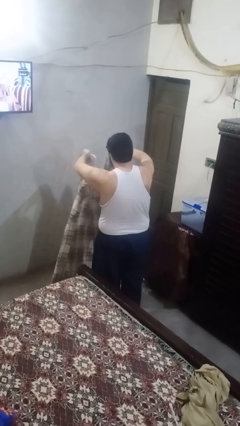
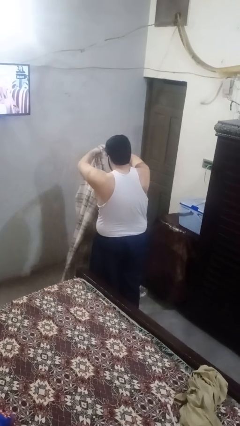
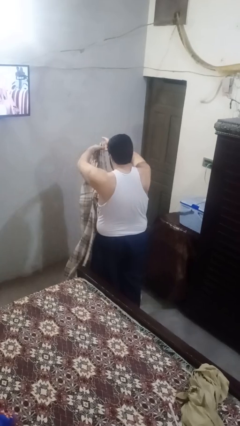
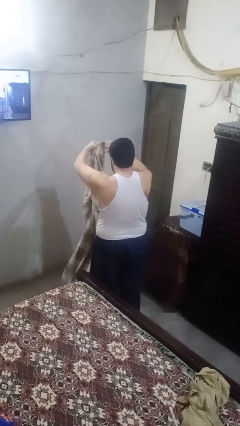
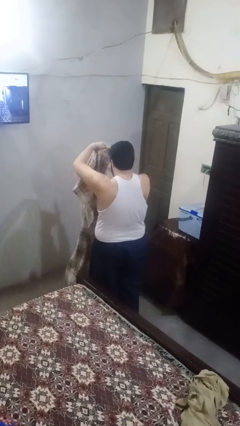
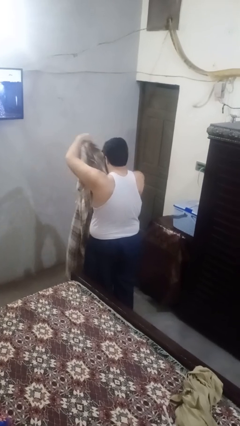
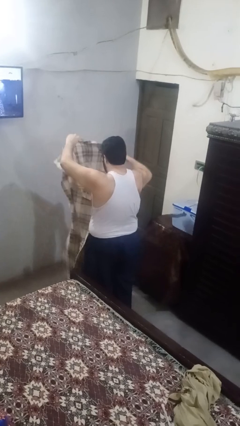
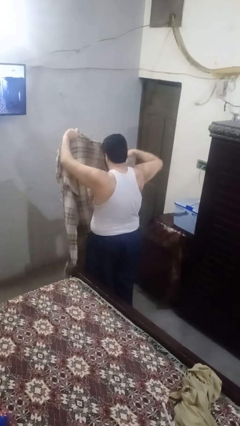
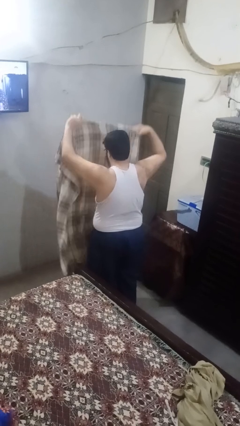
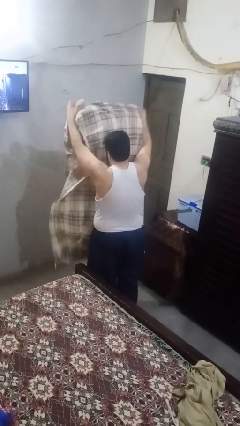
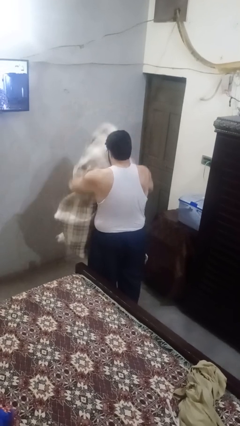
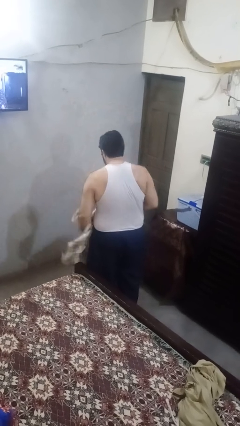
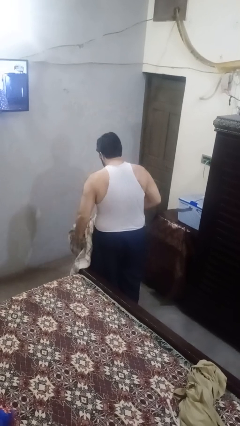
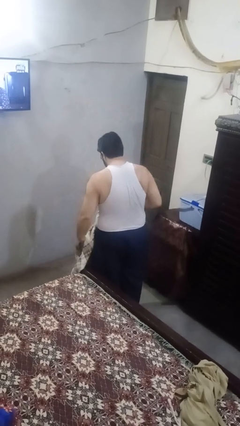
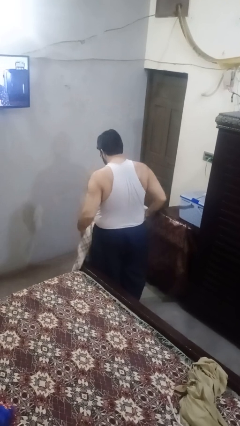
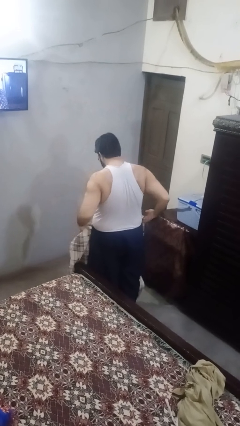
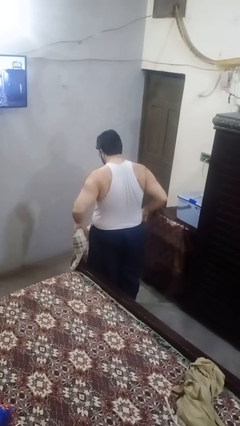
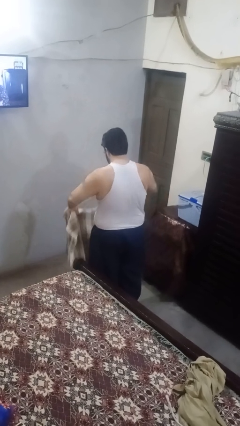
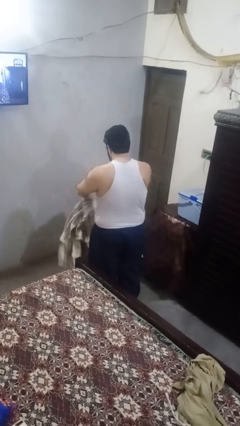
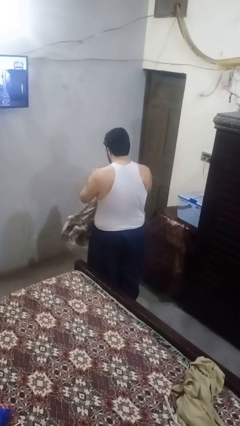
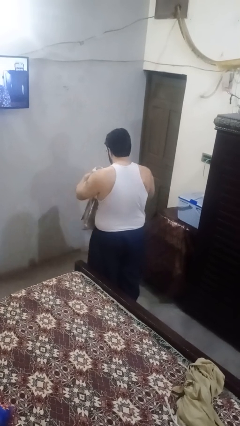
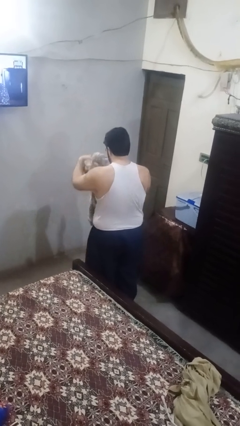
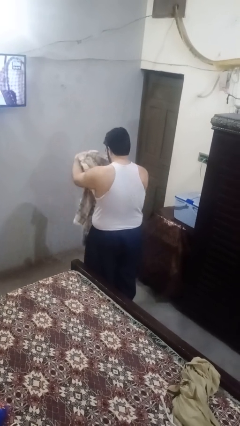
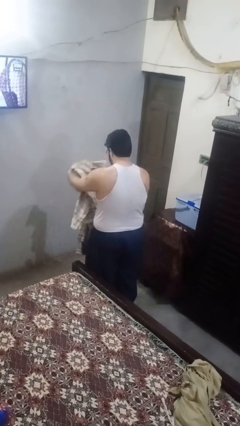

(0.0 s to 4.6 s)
person folds blanket

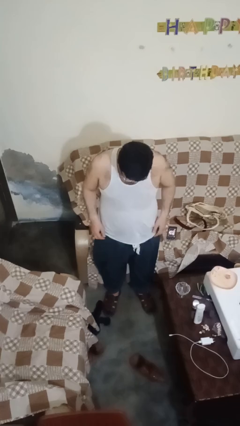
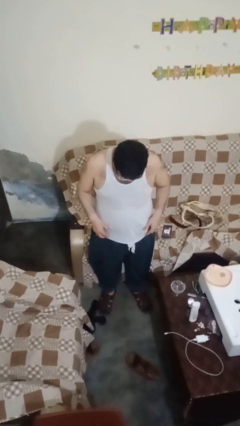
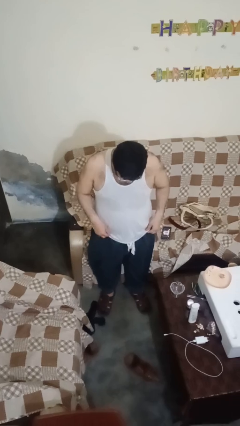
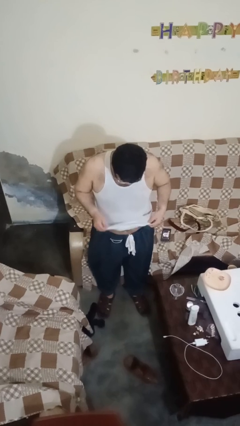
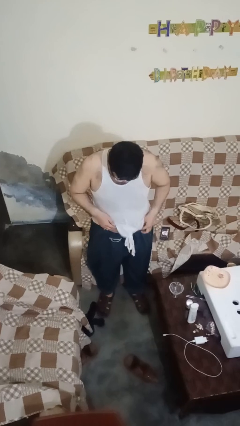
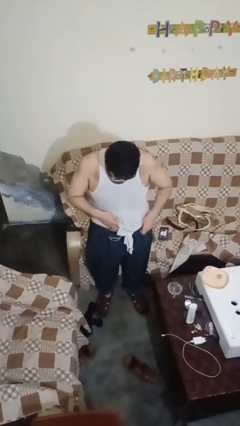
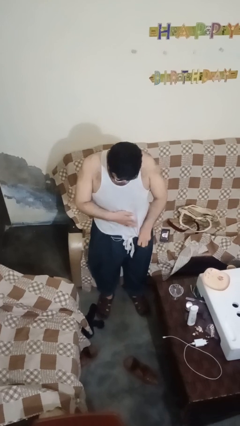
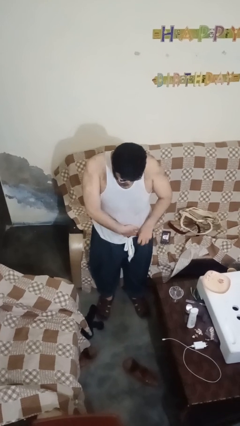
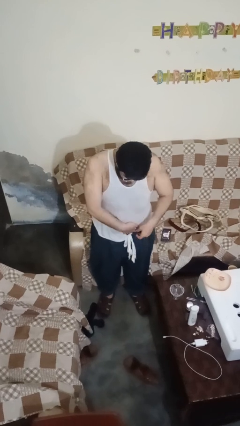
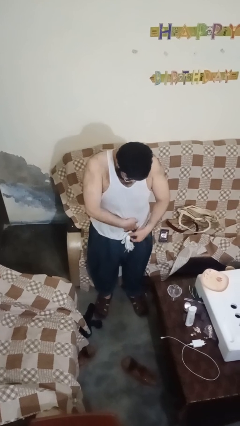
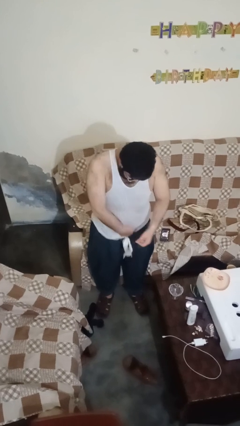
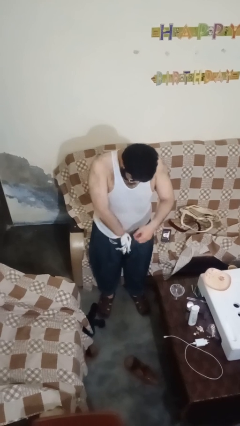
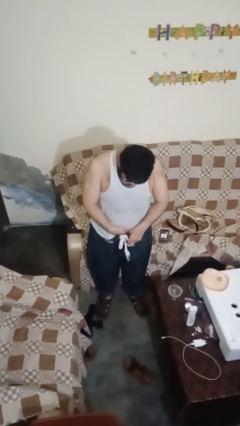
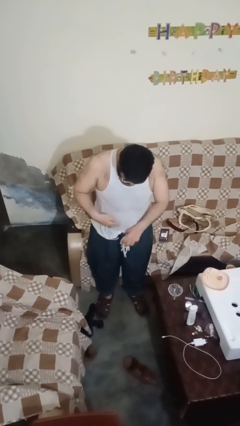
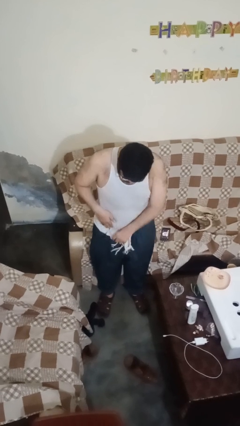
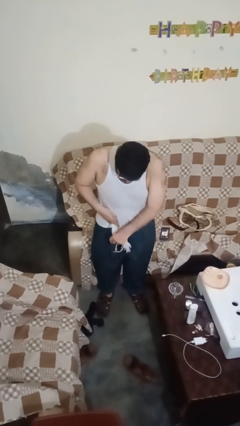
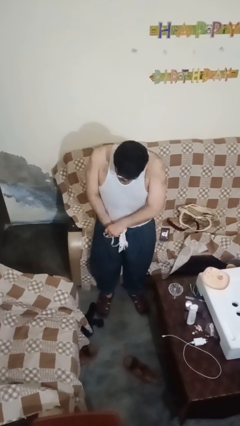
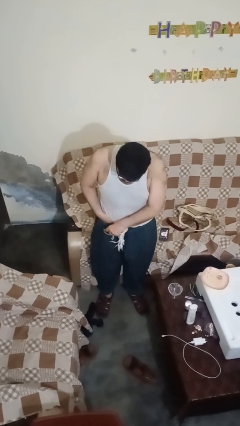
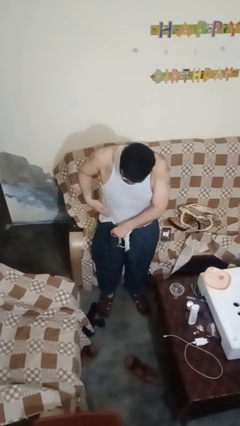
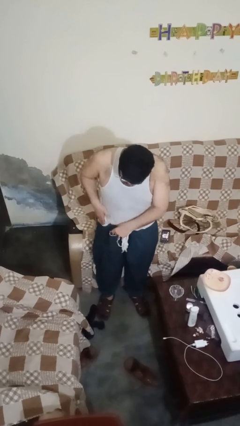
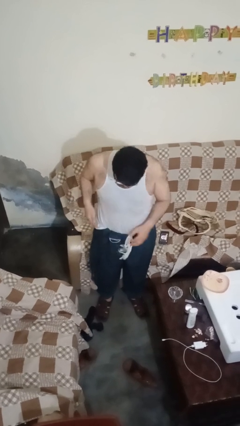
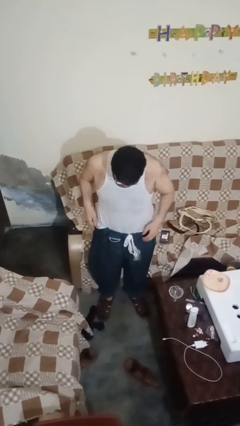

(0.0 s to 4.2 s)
person tucks in shirt

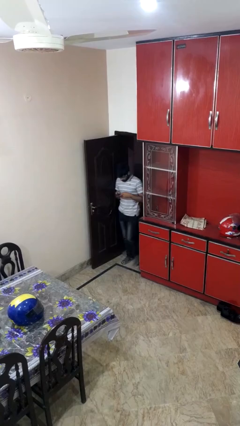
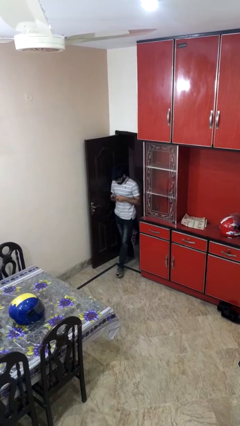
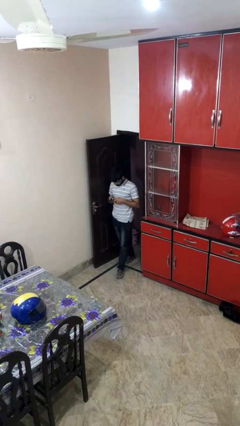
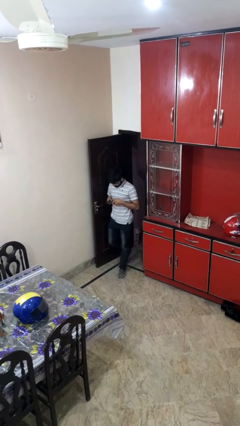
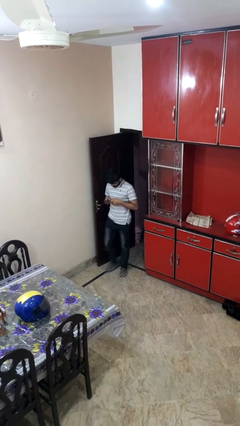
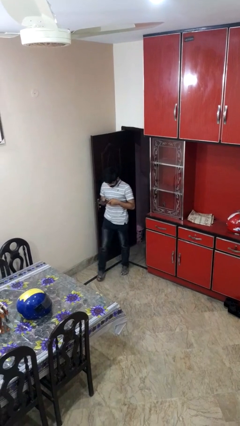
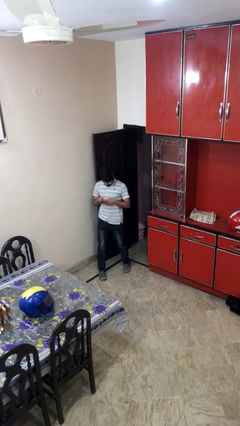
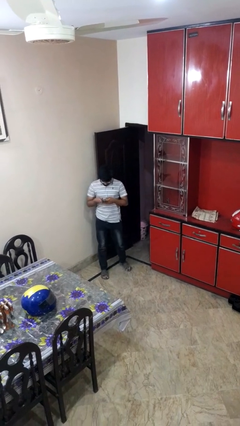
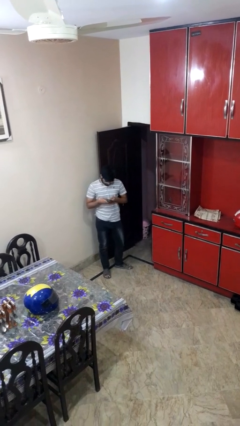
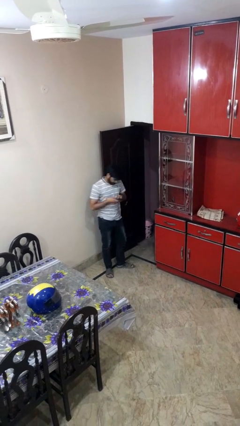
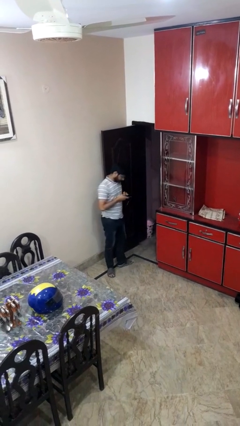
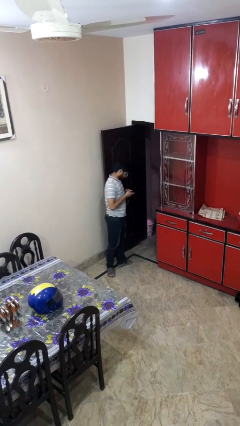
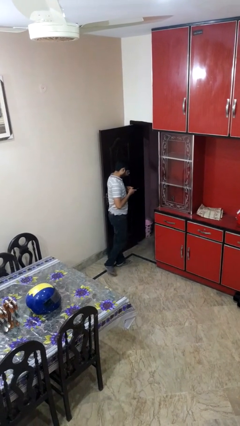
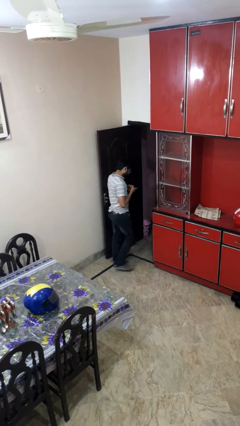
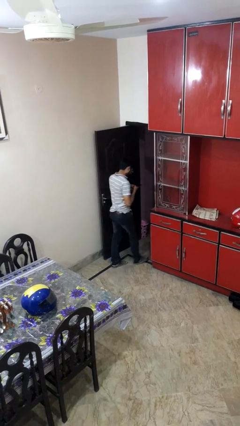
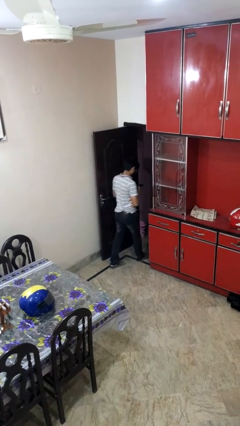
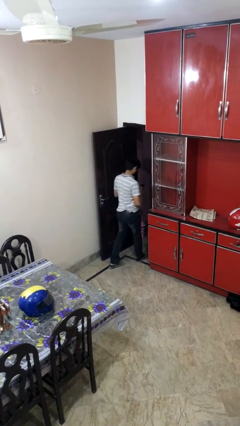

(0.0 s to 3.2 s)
person enters scene through structure

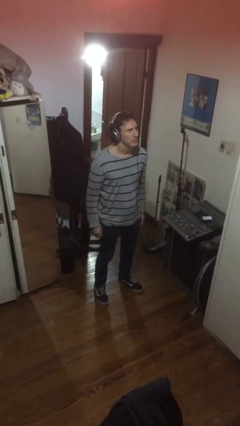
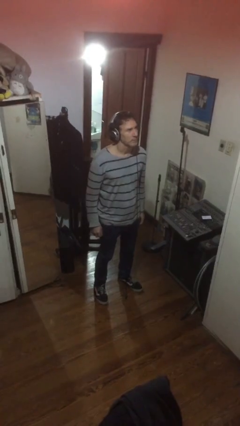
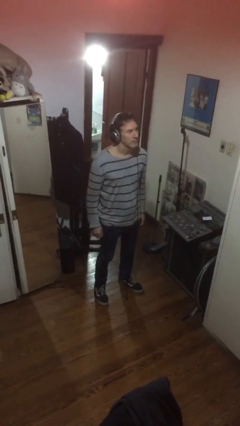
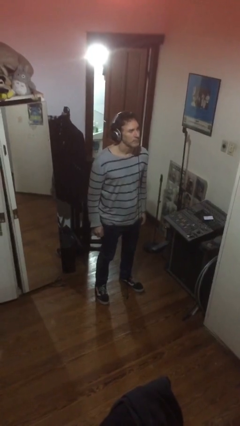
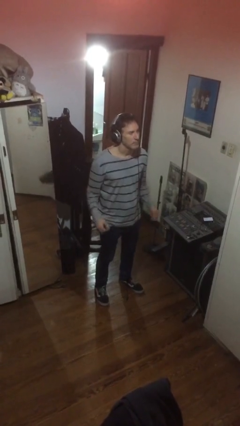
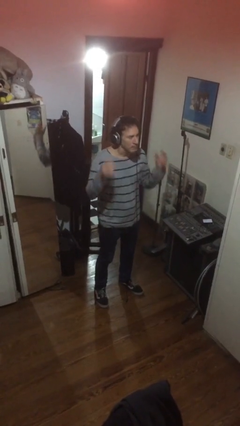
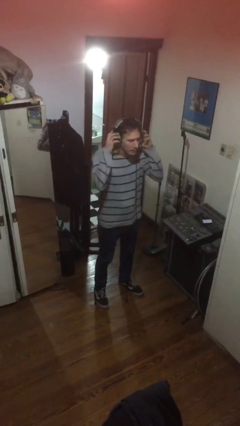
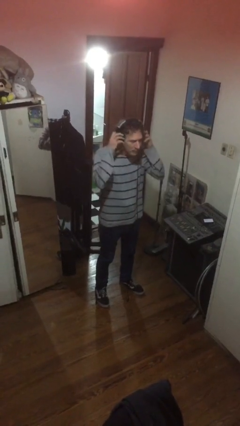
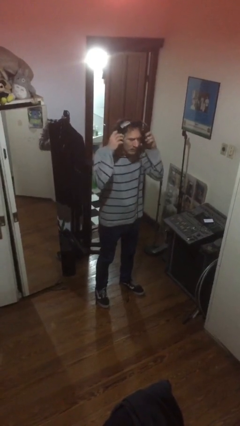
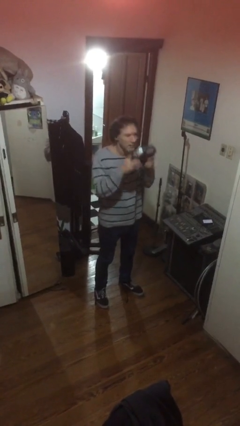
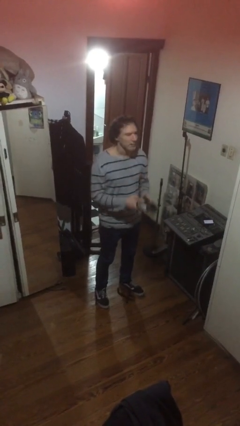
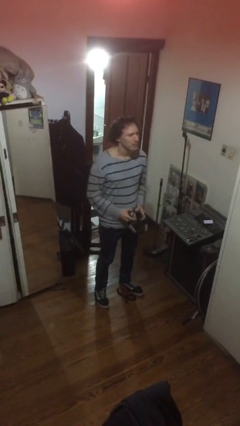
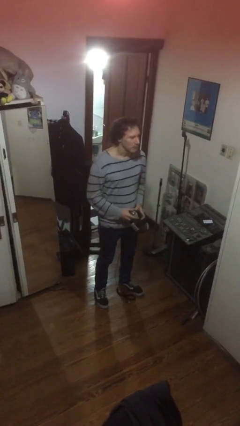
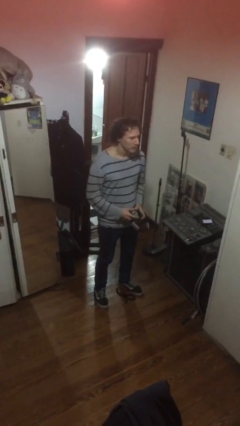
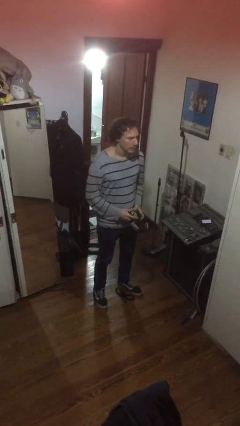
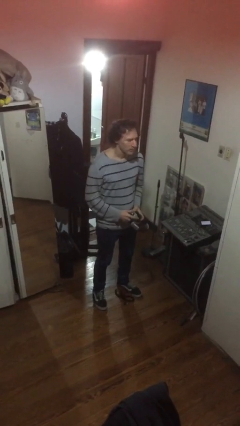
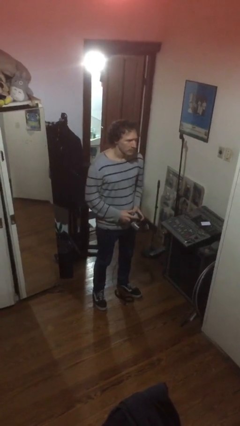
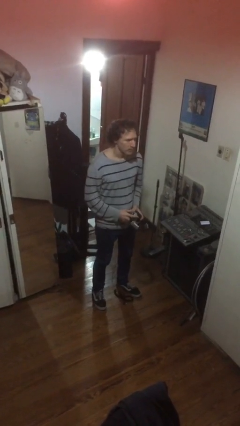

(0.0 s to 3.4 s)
person takes off headphones

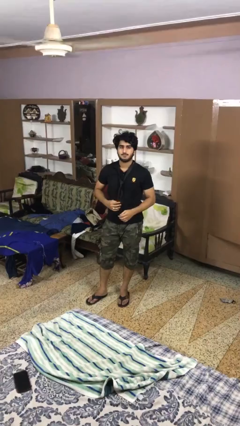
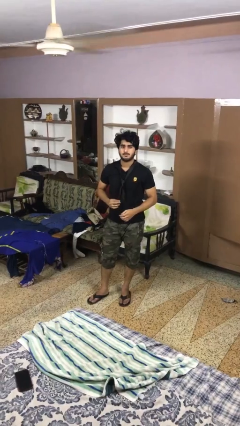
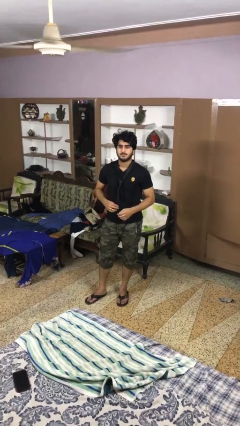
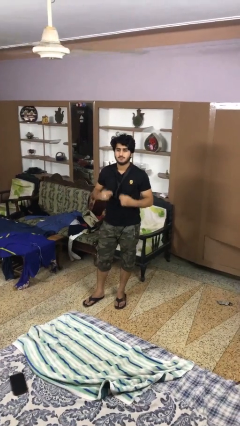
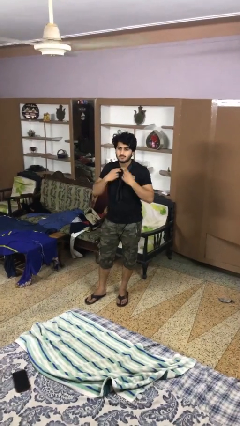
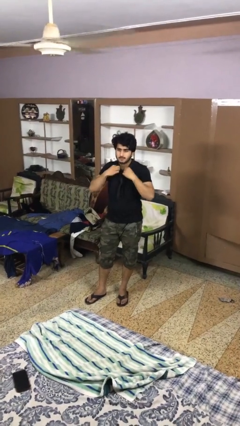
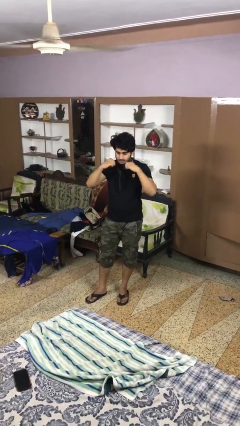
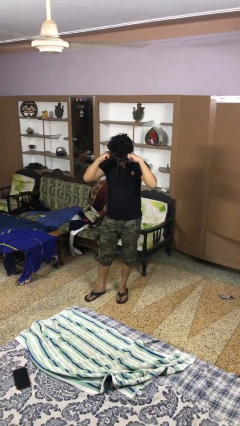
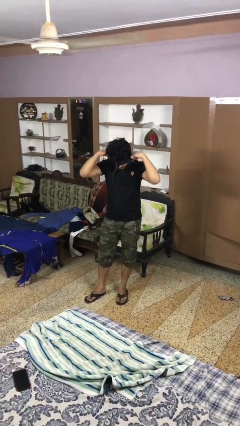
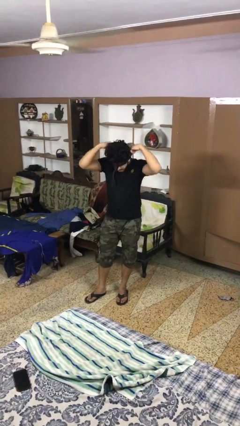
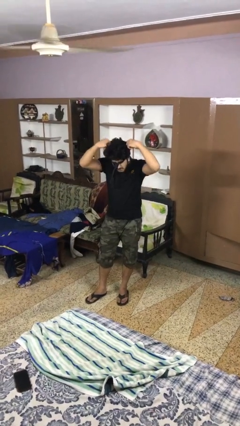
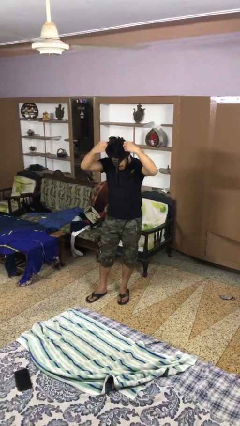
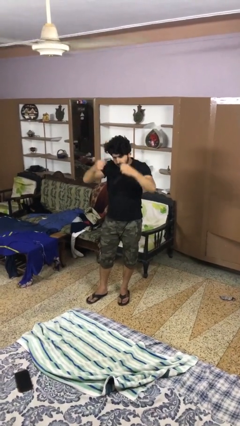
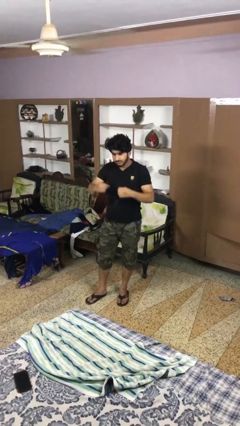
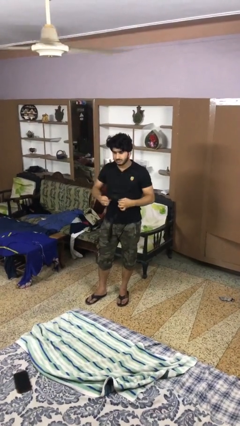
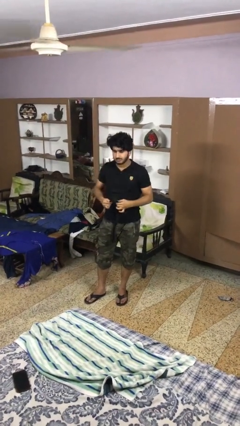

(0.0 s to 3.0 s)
person takes off necktie
